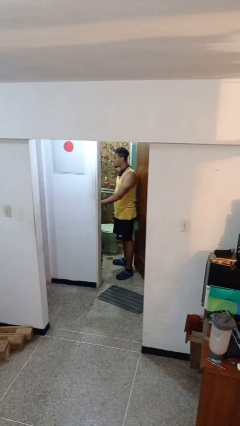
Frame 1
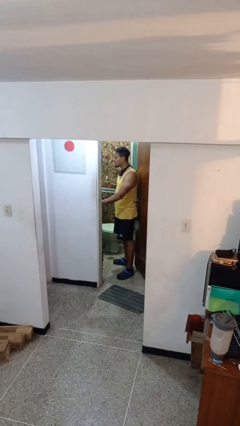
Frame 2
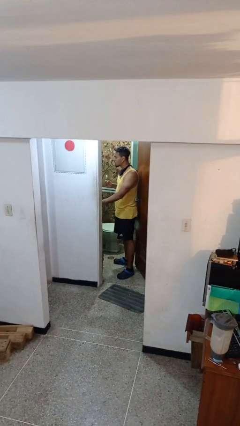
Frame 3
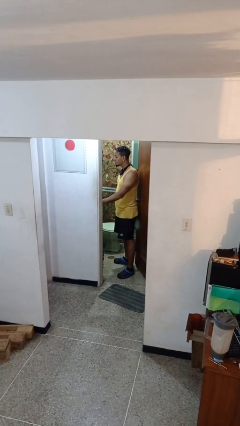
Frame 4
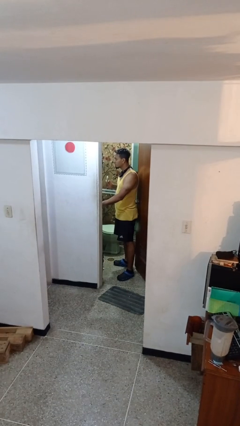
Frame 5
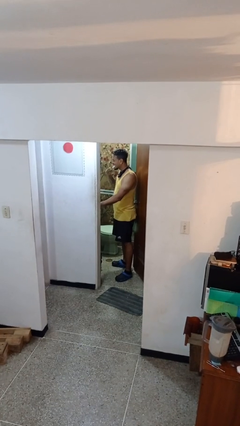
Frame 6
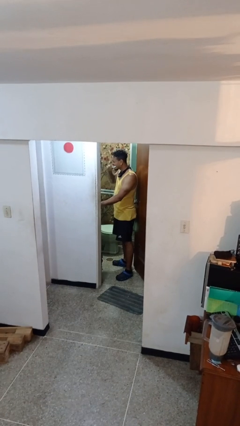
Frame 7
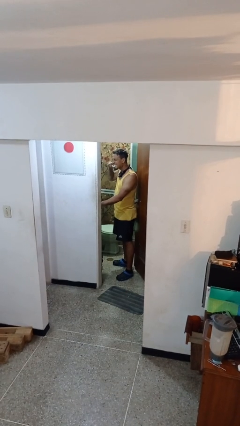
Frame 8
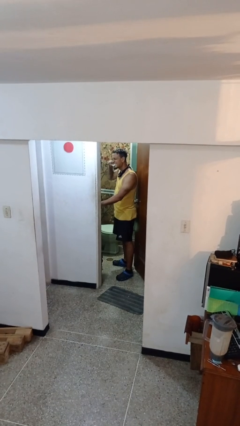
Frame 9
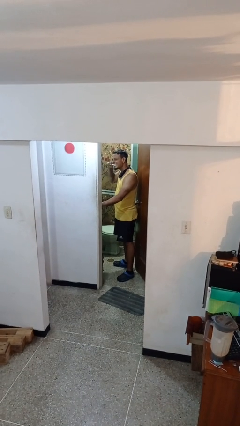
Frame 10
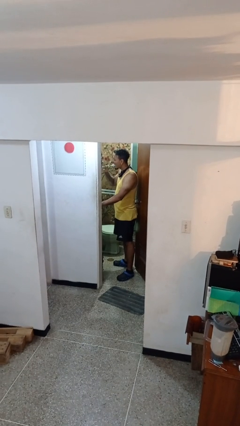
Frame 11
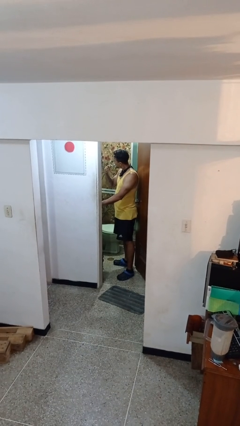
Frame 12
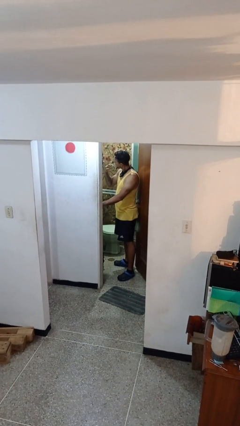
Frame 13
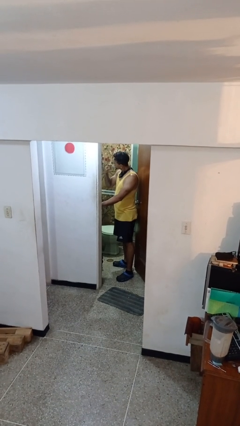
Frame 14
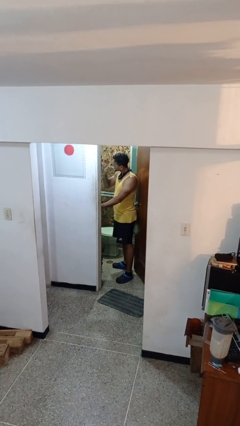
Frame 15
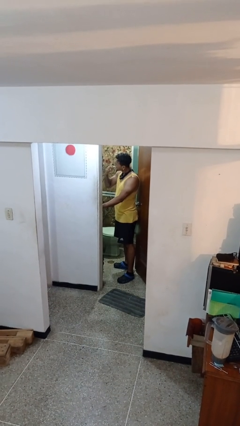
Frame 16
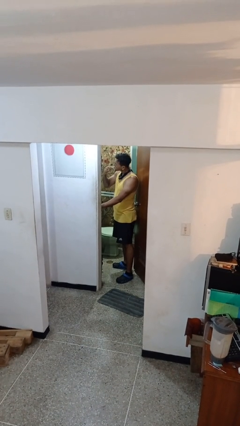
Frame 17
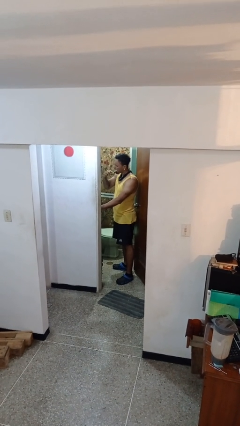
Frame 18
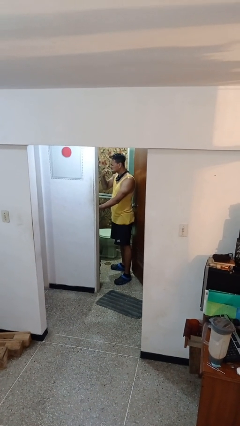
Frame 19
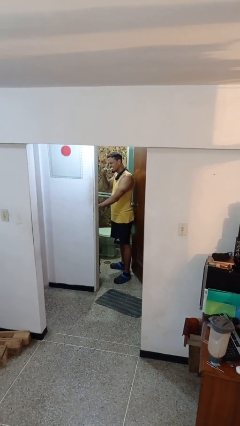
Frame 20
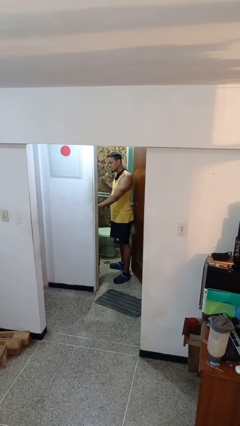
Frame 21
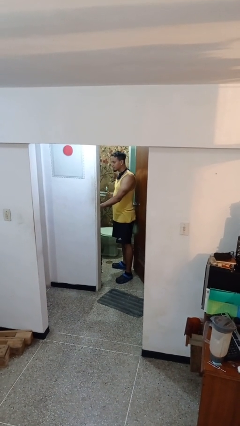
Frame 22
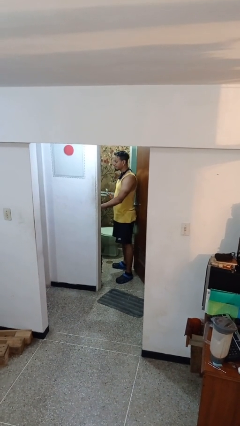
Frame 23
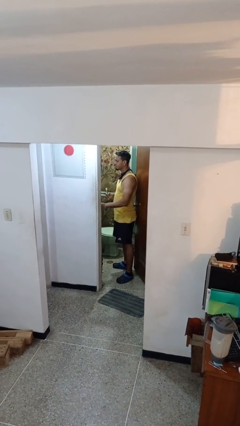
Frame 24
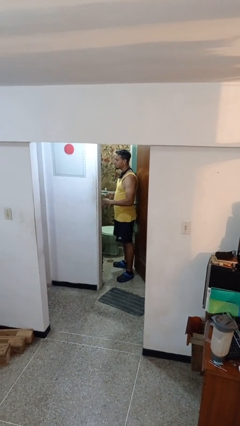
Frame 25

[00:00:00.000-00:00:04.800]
person brushes teeth

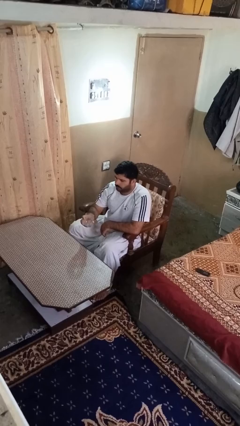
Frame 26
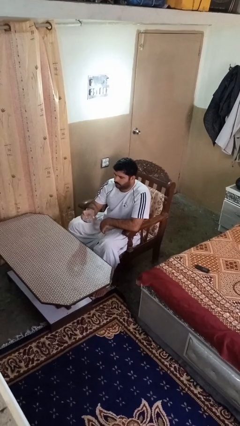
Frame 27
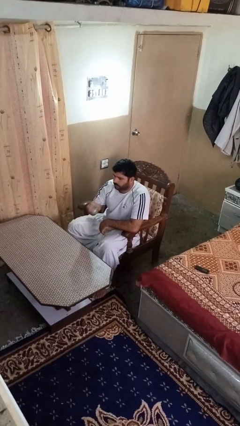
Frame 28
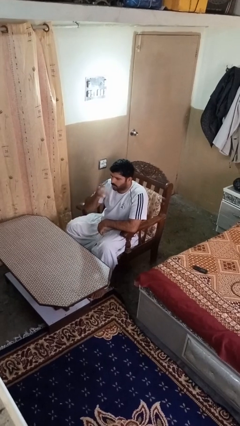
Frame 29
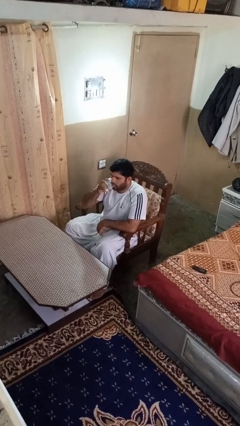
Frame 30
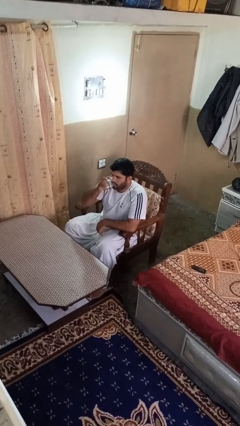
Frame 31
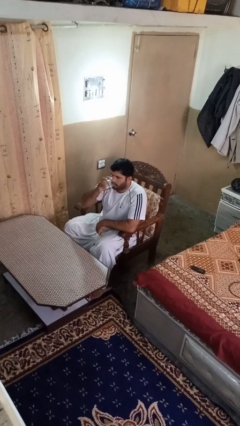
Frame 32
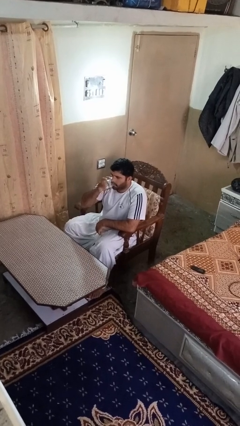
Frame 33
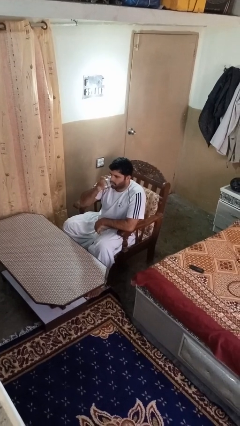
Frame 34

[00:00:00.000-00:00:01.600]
person drinks from shotglass

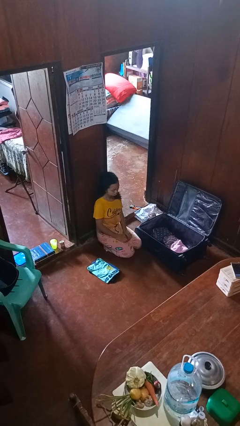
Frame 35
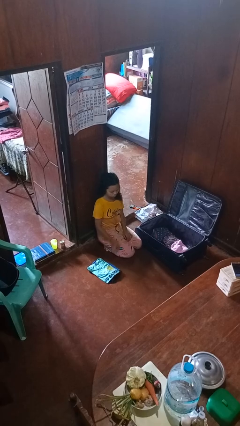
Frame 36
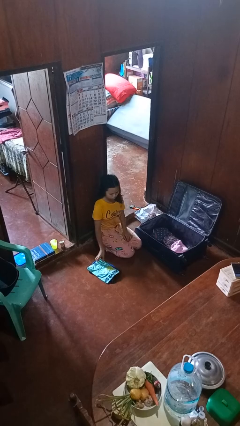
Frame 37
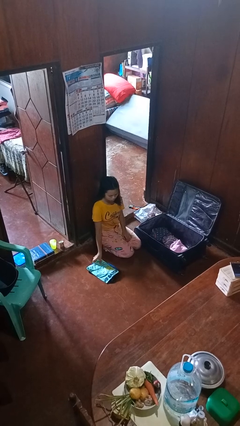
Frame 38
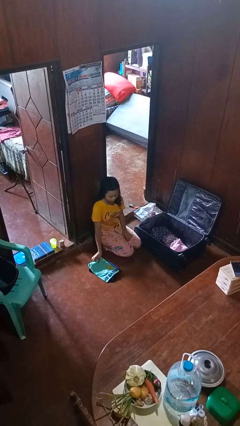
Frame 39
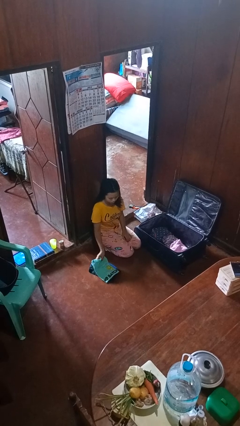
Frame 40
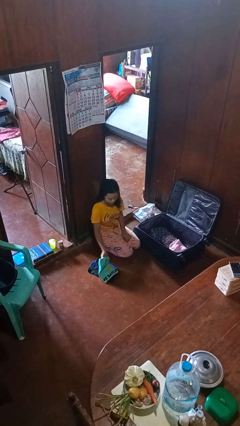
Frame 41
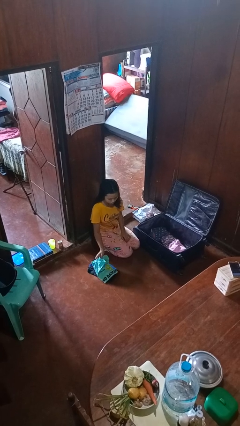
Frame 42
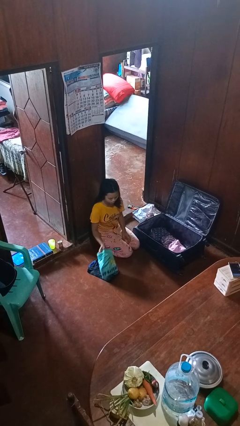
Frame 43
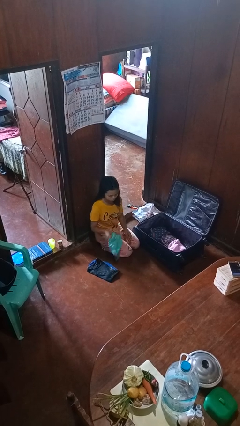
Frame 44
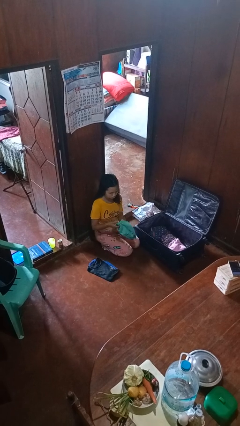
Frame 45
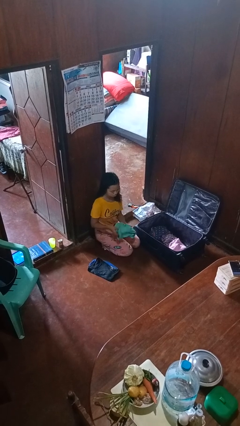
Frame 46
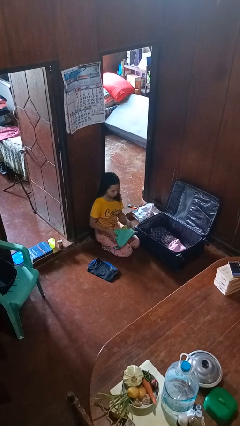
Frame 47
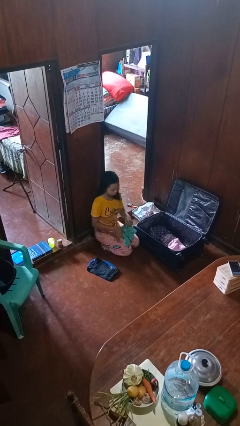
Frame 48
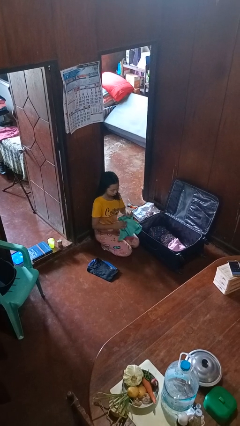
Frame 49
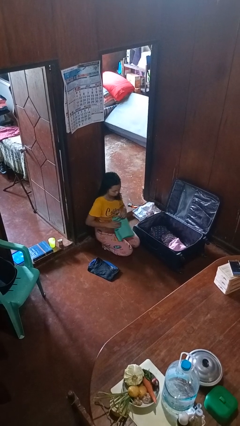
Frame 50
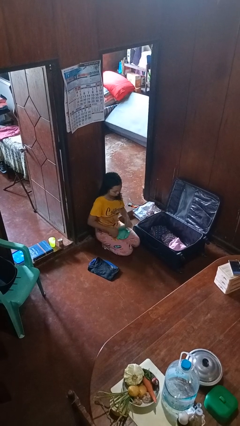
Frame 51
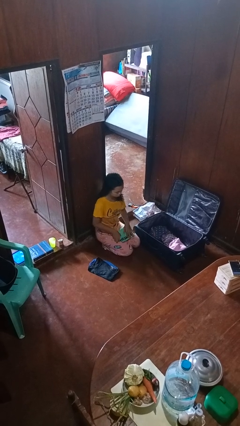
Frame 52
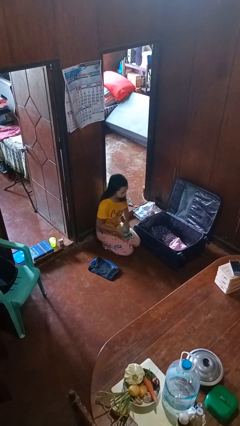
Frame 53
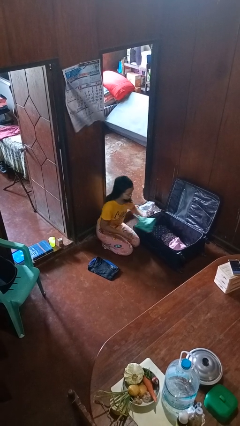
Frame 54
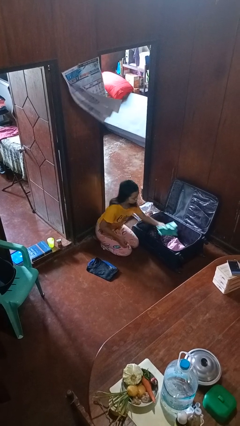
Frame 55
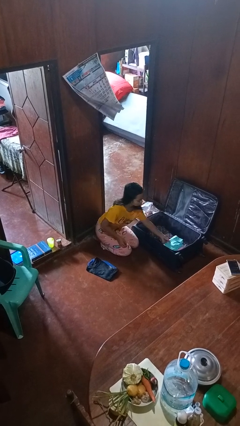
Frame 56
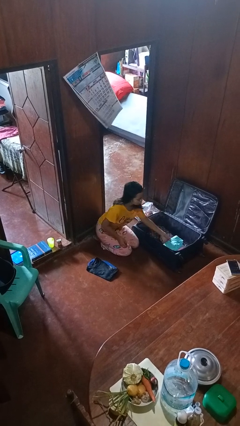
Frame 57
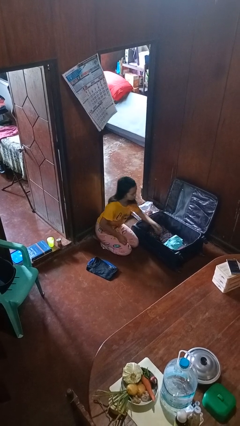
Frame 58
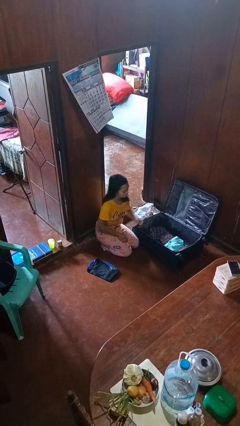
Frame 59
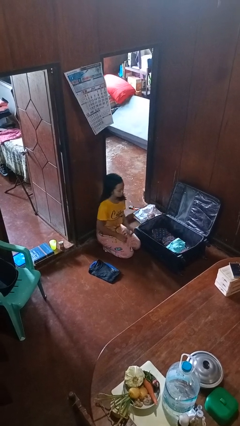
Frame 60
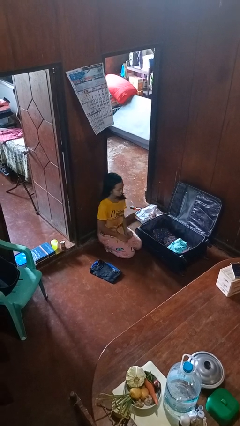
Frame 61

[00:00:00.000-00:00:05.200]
person loads clothes into suitcase

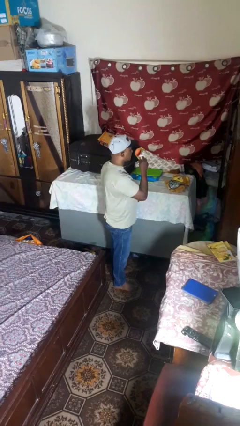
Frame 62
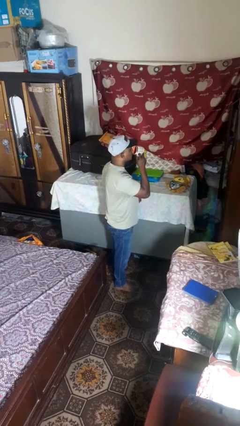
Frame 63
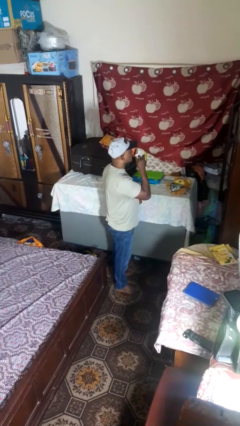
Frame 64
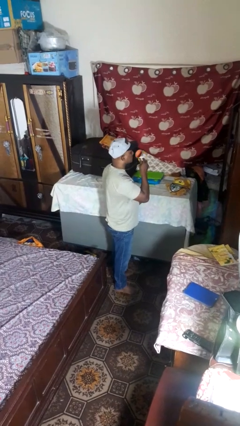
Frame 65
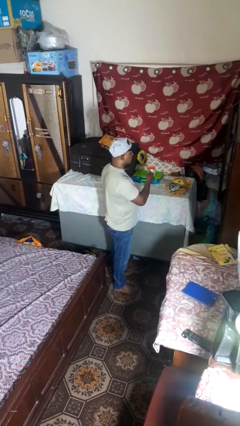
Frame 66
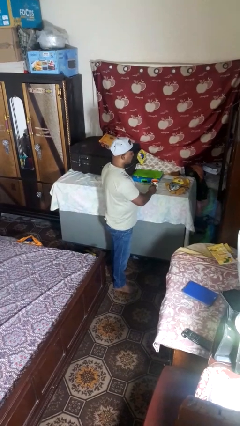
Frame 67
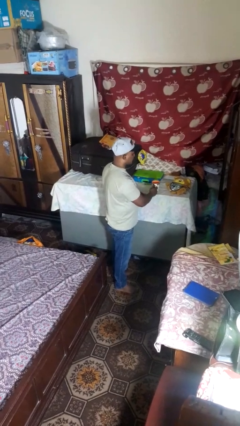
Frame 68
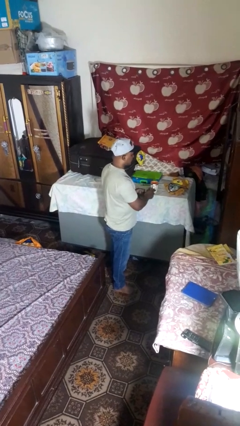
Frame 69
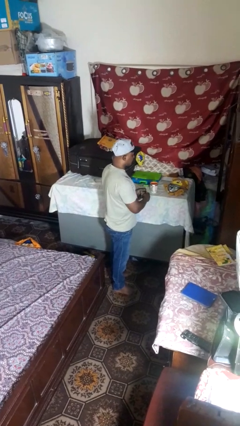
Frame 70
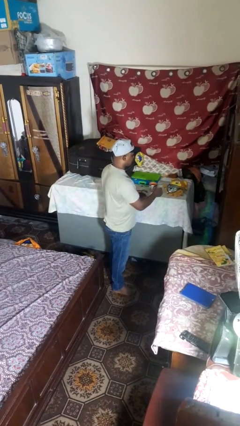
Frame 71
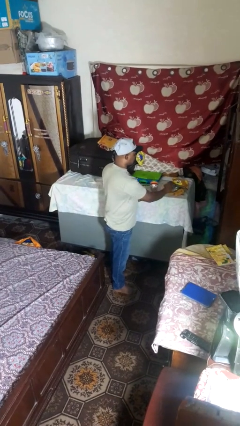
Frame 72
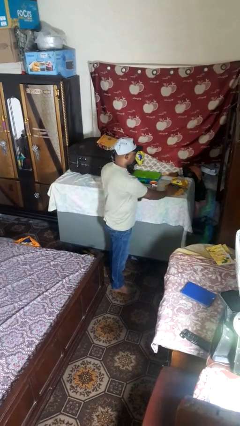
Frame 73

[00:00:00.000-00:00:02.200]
person drinks from cup

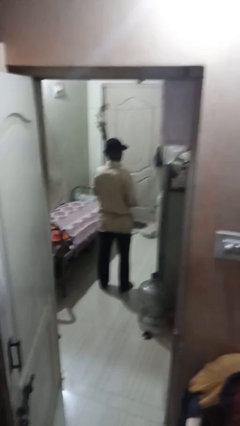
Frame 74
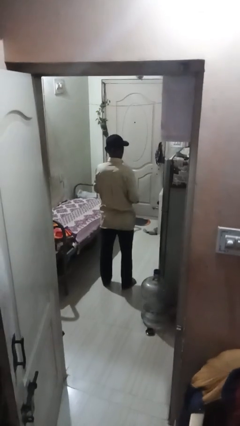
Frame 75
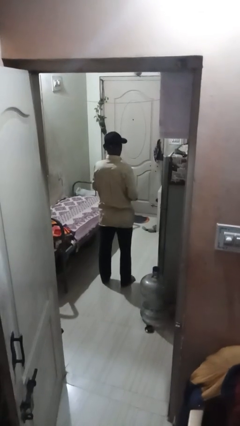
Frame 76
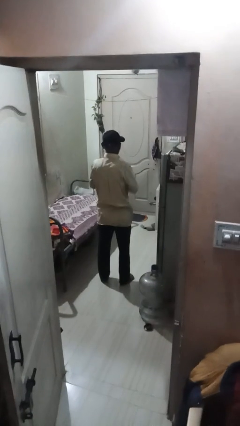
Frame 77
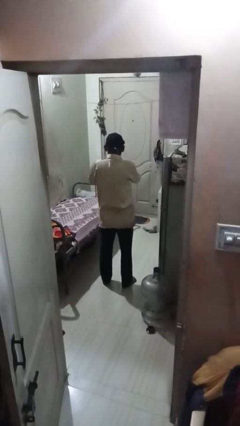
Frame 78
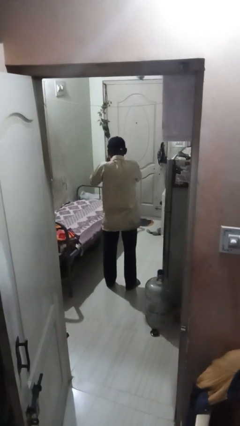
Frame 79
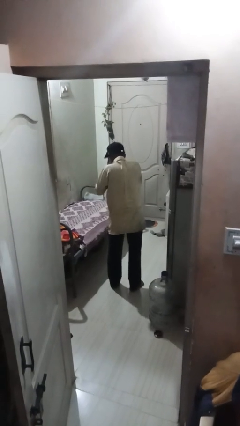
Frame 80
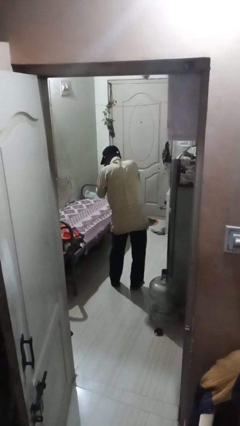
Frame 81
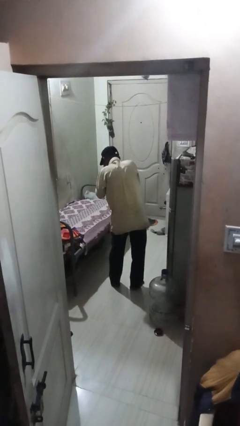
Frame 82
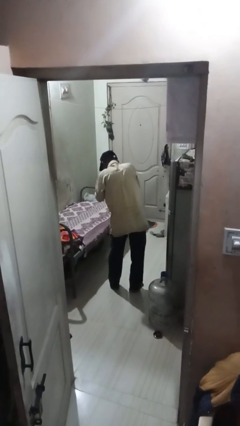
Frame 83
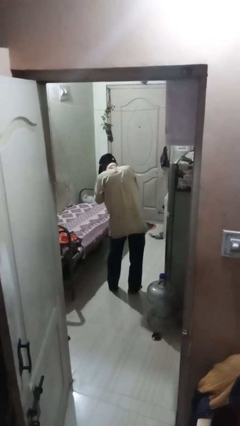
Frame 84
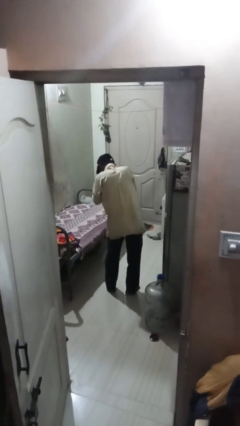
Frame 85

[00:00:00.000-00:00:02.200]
person sneezes into hand

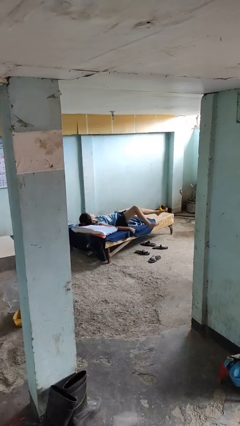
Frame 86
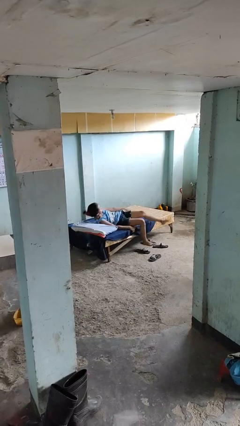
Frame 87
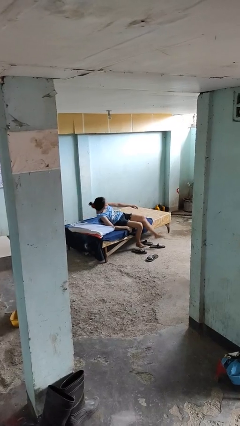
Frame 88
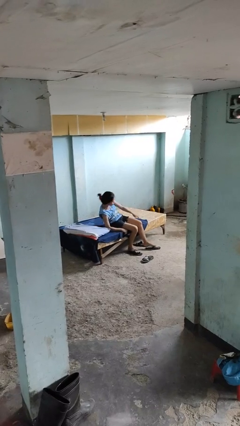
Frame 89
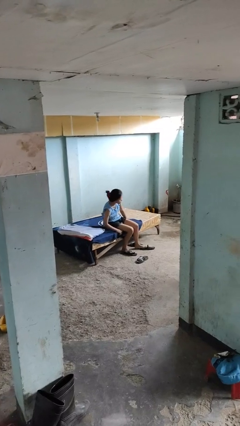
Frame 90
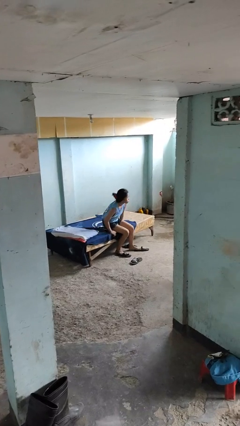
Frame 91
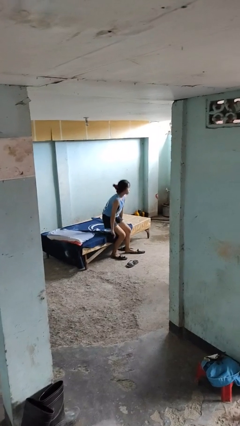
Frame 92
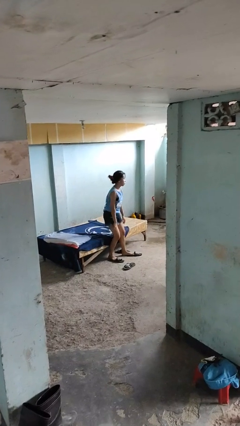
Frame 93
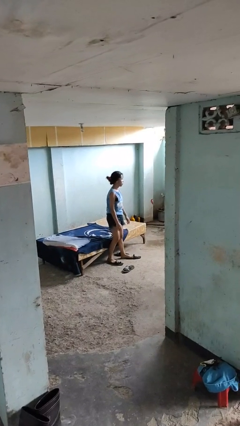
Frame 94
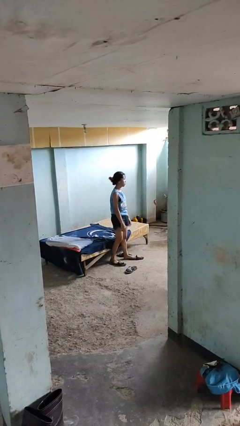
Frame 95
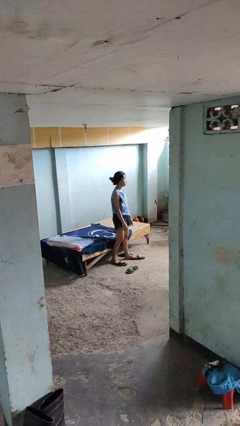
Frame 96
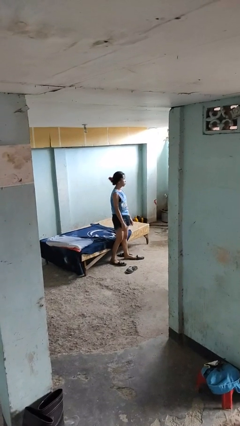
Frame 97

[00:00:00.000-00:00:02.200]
person stands up
